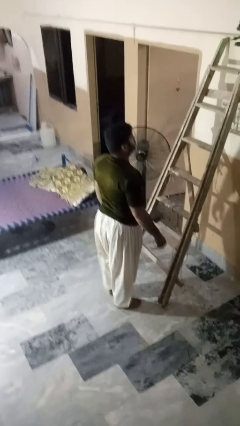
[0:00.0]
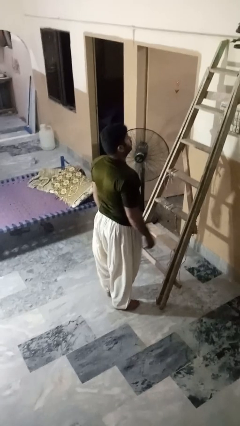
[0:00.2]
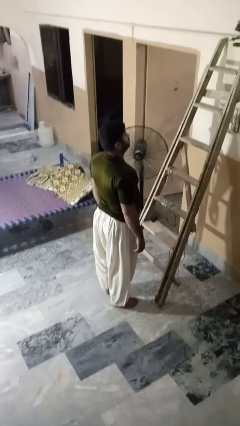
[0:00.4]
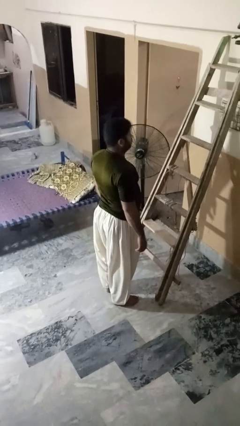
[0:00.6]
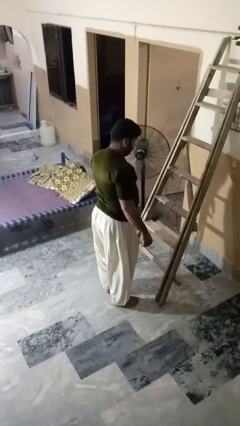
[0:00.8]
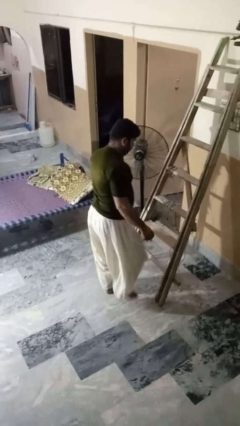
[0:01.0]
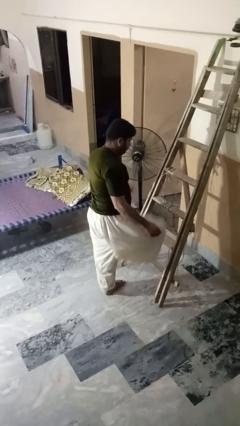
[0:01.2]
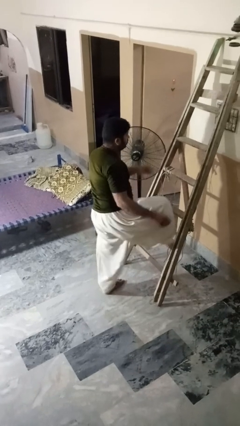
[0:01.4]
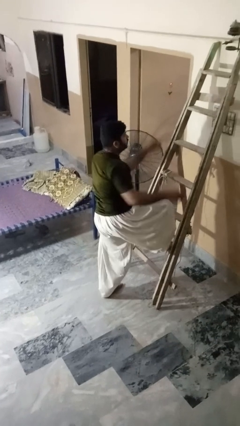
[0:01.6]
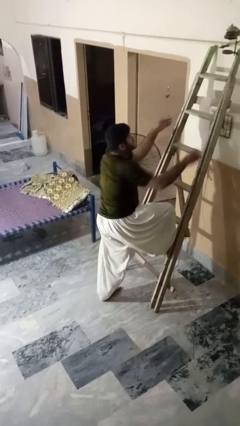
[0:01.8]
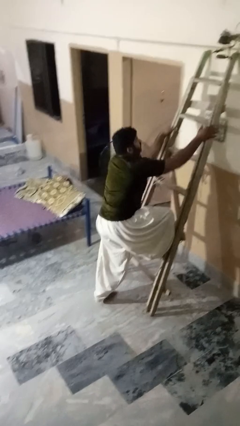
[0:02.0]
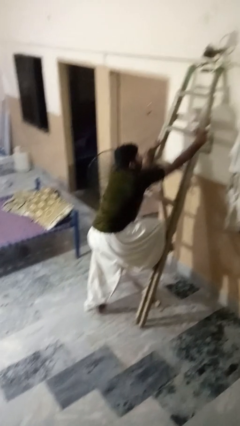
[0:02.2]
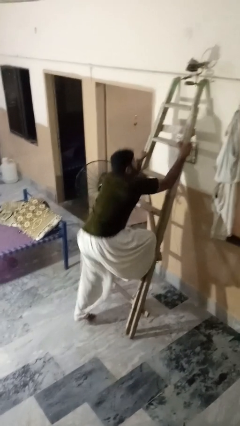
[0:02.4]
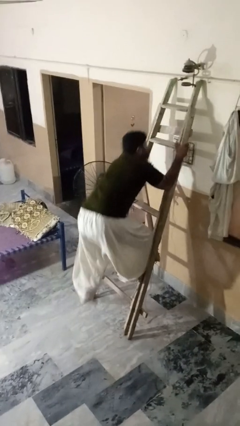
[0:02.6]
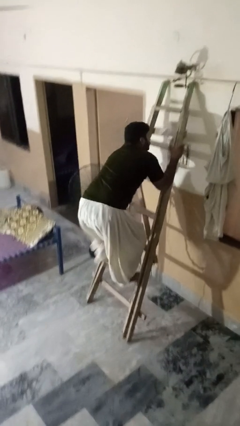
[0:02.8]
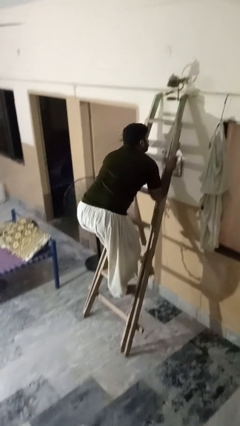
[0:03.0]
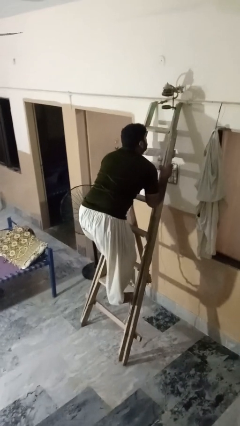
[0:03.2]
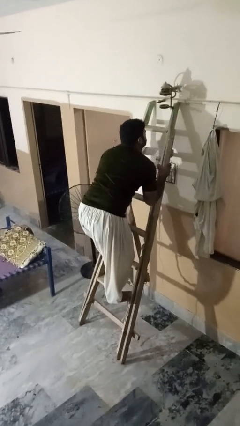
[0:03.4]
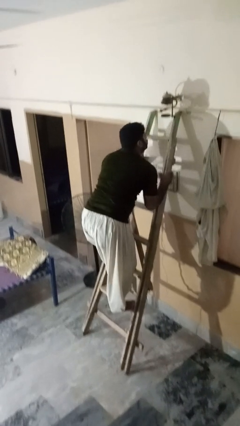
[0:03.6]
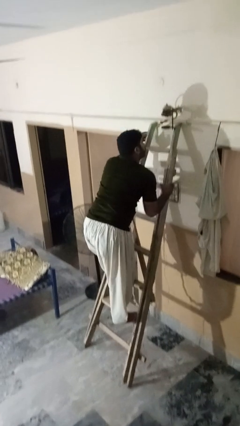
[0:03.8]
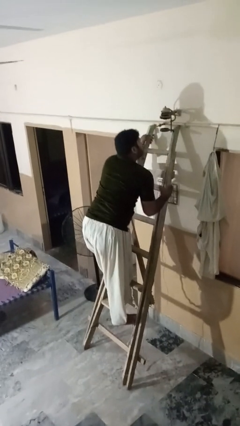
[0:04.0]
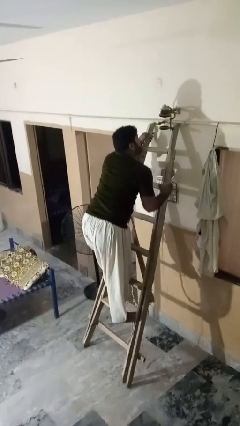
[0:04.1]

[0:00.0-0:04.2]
person climbs up ladder

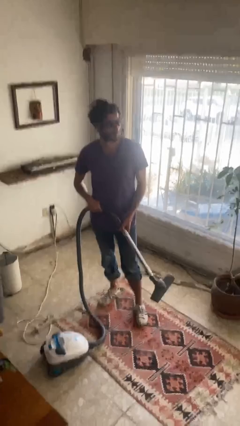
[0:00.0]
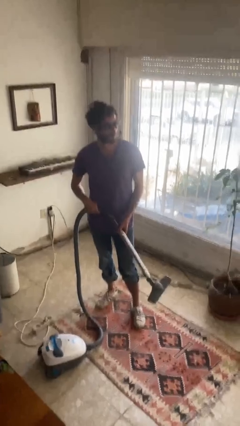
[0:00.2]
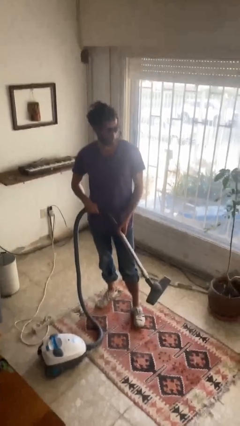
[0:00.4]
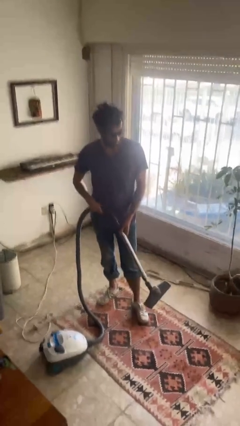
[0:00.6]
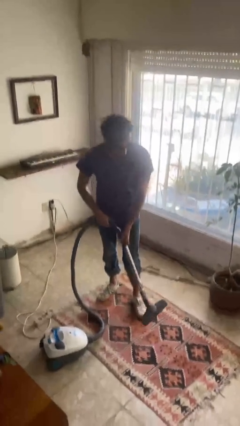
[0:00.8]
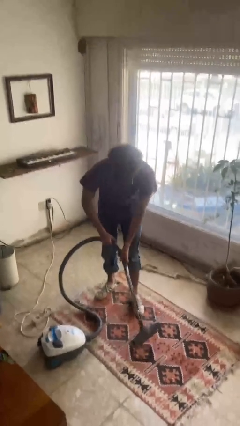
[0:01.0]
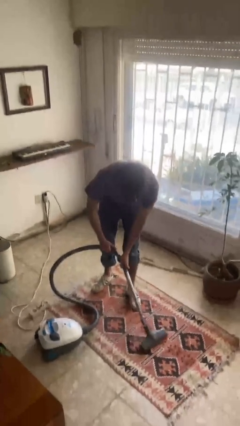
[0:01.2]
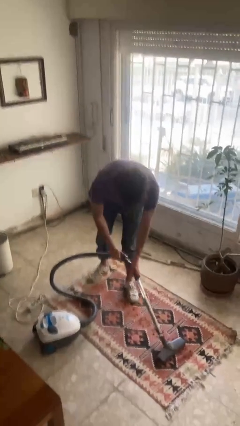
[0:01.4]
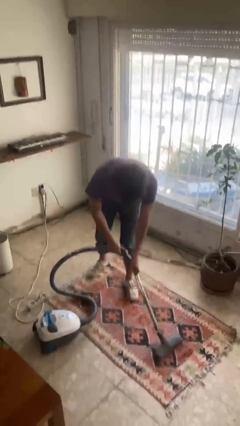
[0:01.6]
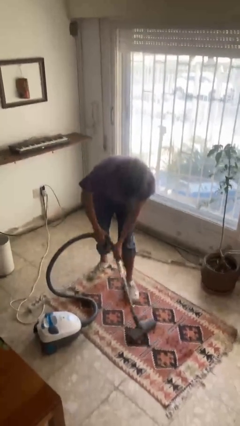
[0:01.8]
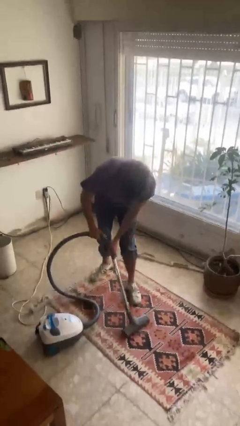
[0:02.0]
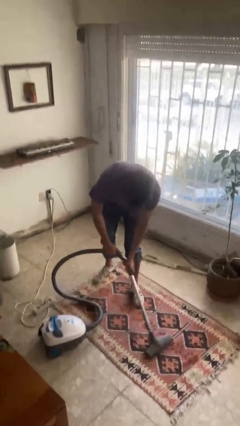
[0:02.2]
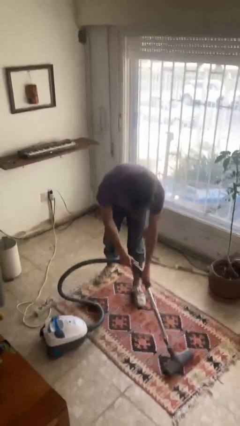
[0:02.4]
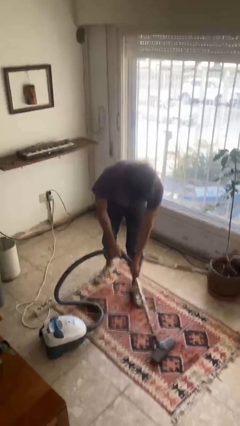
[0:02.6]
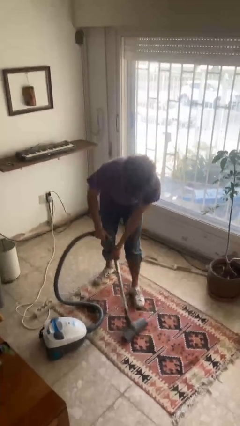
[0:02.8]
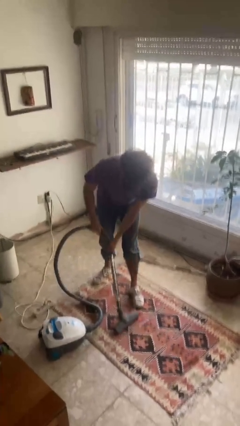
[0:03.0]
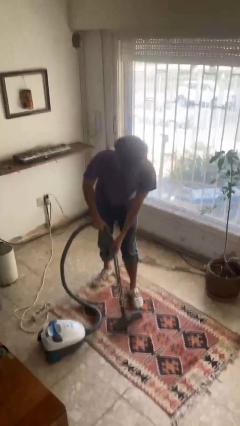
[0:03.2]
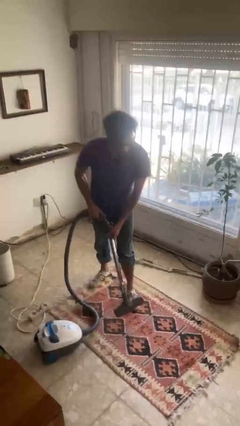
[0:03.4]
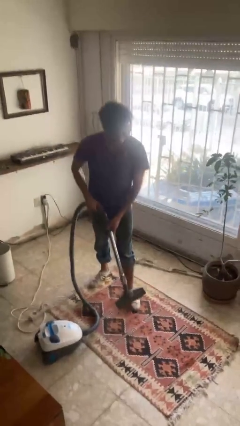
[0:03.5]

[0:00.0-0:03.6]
person vacuums carpet

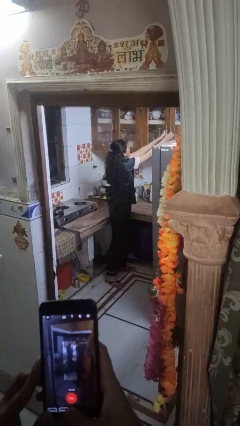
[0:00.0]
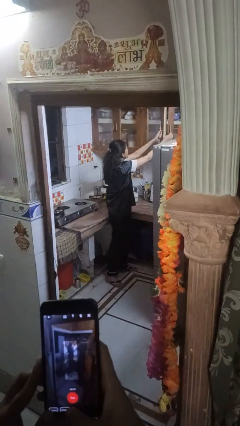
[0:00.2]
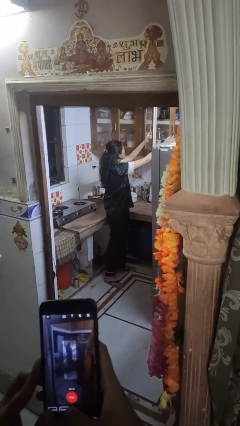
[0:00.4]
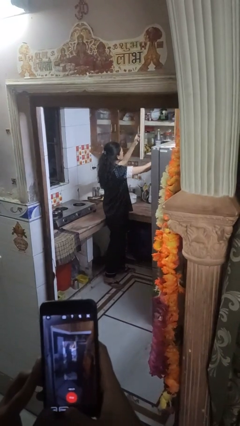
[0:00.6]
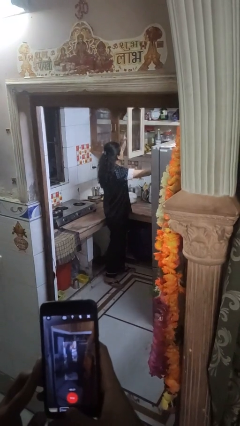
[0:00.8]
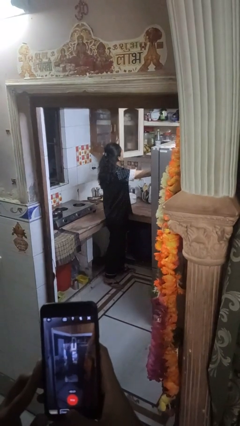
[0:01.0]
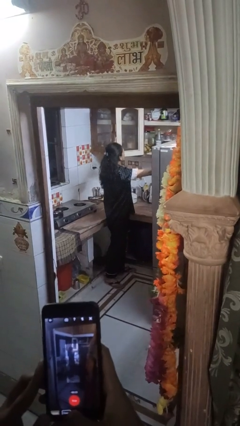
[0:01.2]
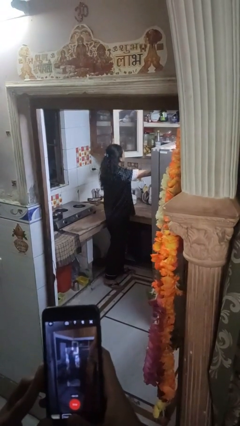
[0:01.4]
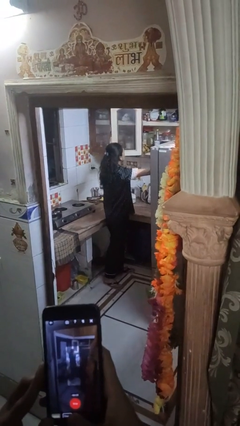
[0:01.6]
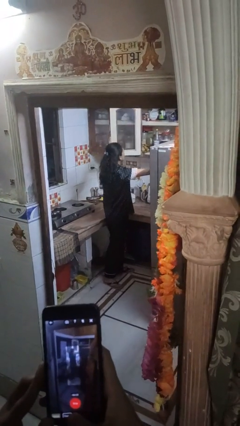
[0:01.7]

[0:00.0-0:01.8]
person opens cabinet

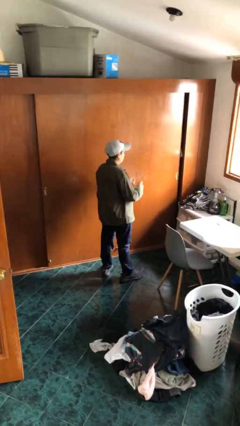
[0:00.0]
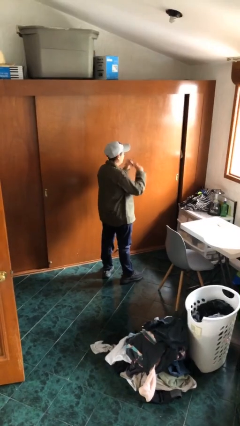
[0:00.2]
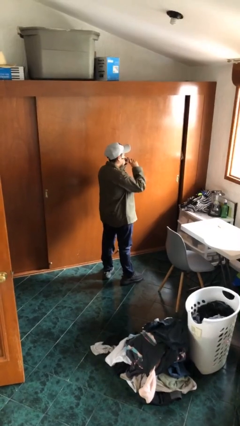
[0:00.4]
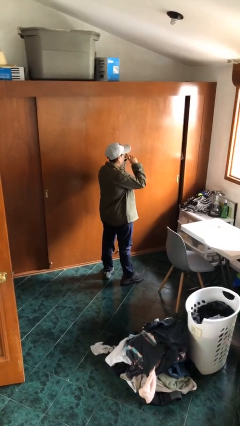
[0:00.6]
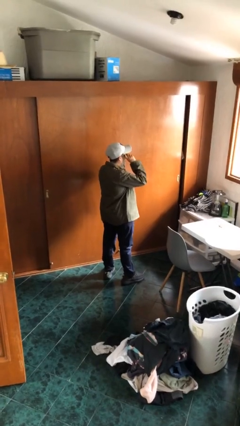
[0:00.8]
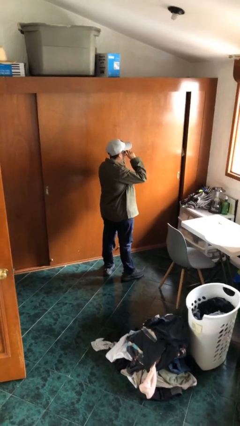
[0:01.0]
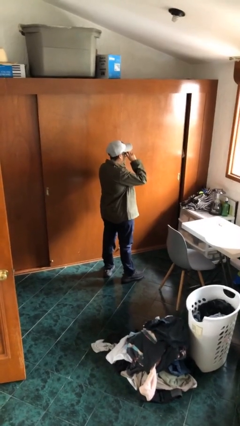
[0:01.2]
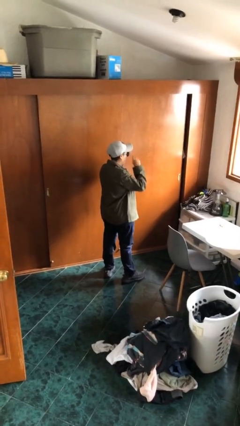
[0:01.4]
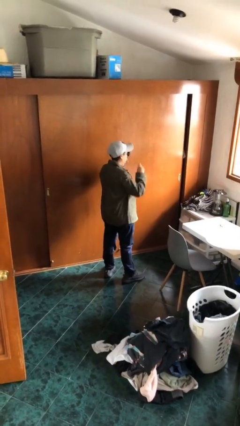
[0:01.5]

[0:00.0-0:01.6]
person puts on sunglasses

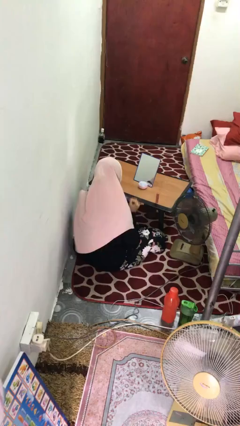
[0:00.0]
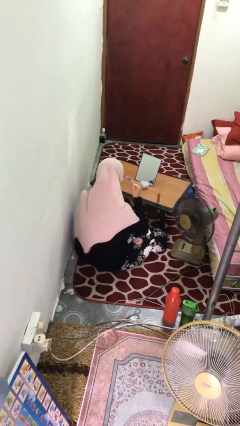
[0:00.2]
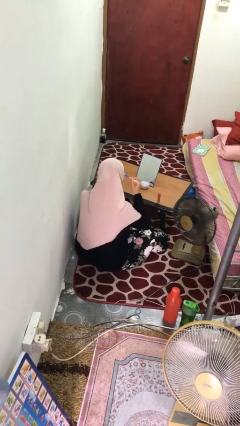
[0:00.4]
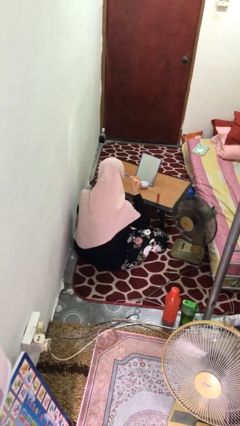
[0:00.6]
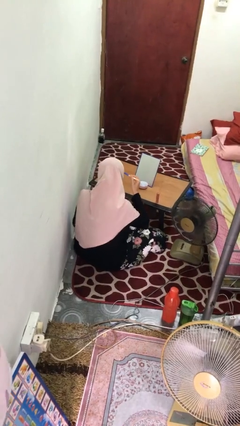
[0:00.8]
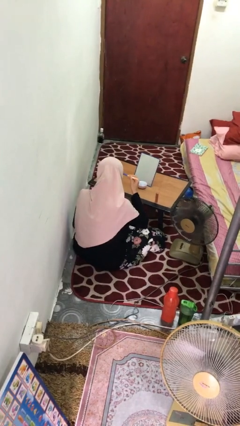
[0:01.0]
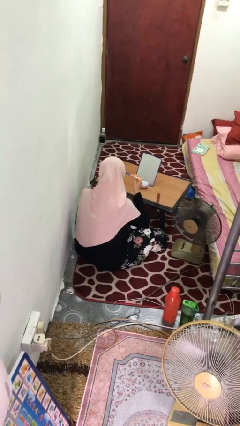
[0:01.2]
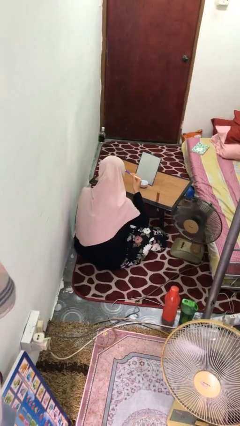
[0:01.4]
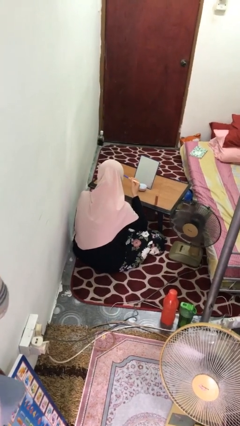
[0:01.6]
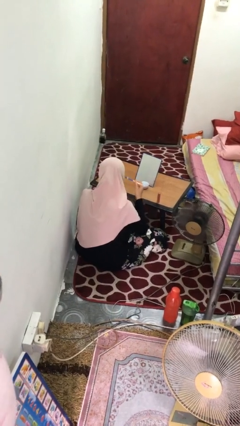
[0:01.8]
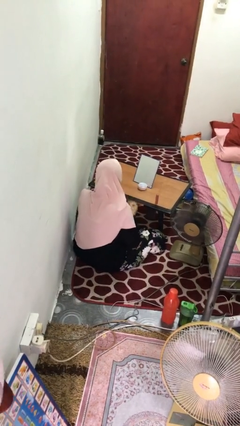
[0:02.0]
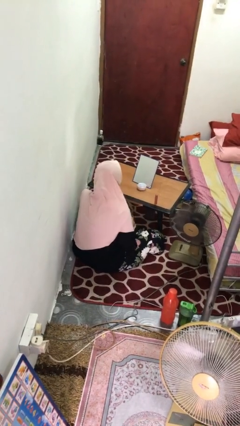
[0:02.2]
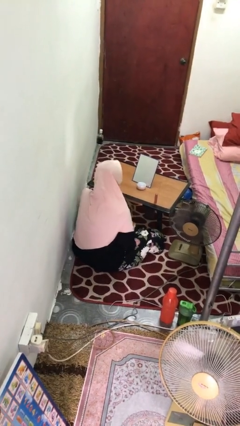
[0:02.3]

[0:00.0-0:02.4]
person applies eye makeup

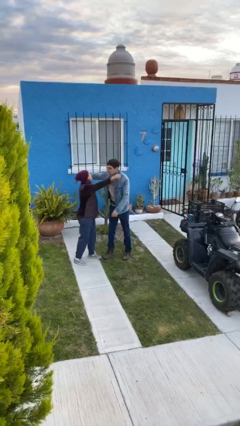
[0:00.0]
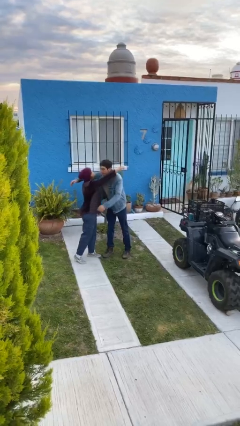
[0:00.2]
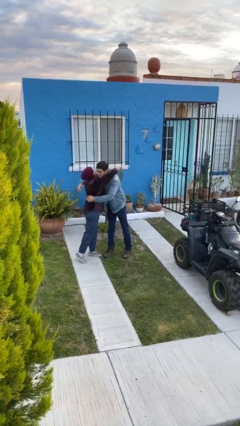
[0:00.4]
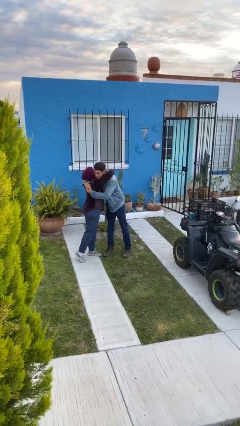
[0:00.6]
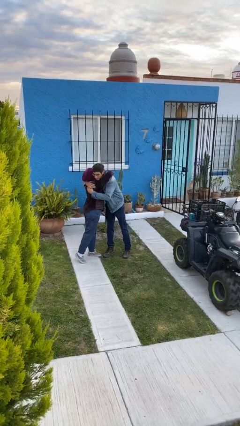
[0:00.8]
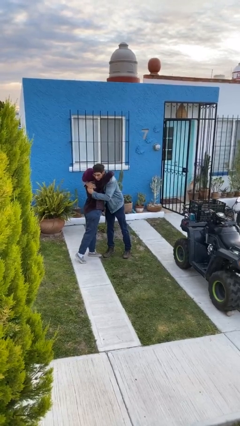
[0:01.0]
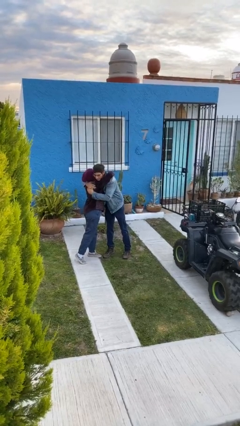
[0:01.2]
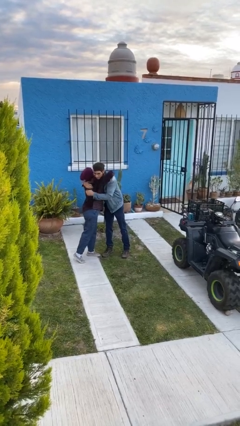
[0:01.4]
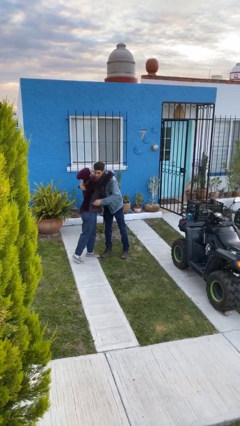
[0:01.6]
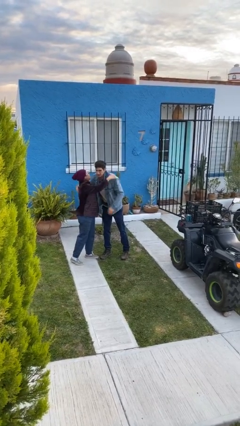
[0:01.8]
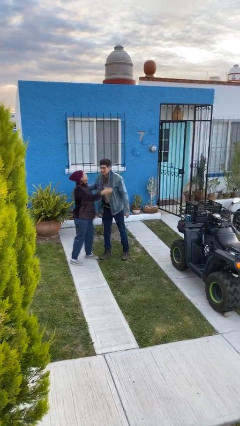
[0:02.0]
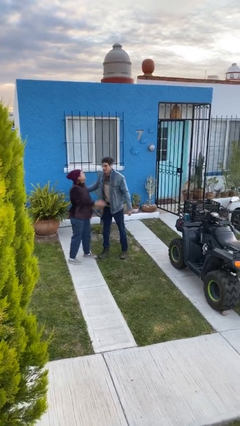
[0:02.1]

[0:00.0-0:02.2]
person embraces person

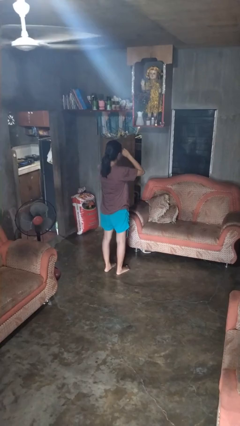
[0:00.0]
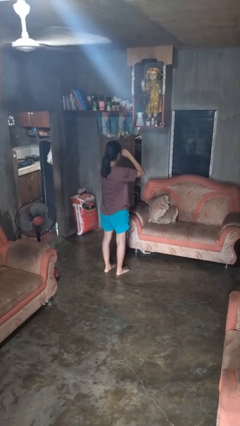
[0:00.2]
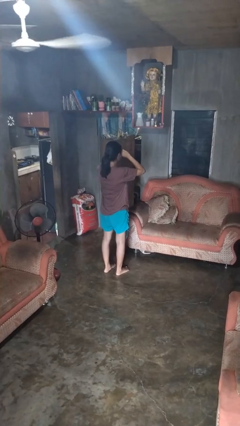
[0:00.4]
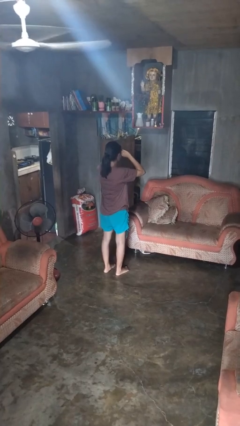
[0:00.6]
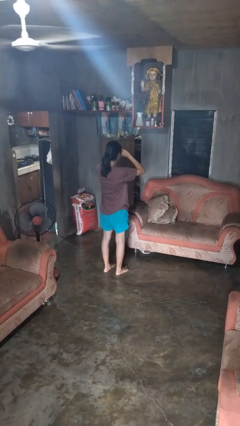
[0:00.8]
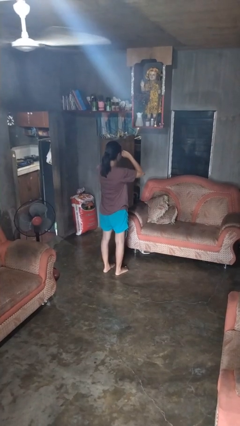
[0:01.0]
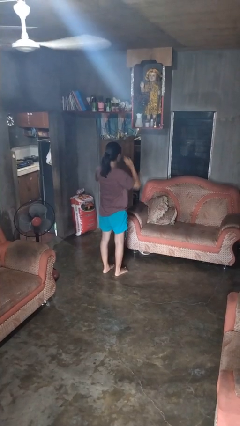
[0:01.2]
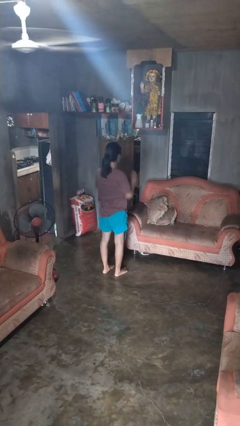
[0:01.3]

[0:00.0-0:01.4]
person rubs eyes
